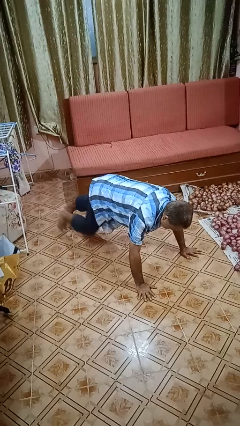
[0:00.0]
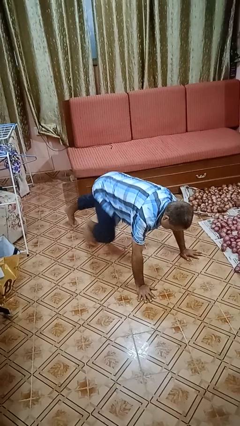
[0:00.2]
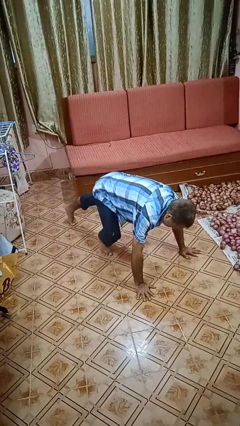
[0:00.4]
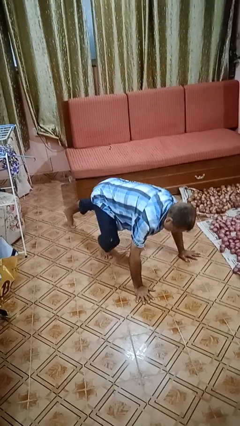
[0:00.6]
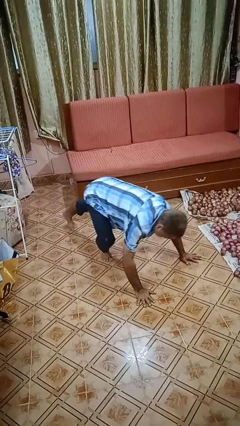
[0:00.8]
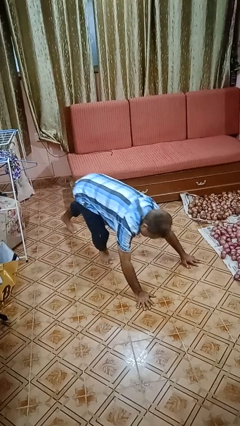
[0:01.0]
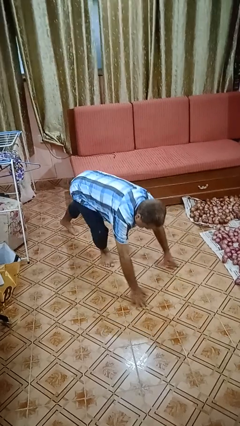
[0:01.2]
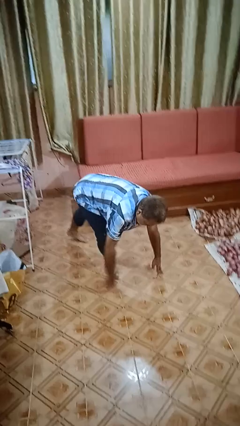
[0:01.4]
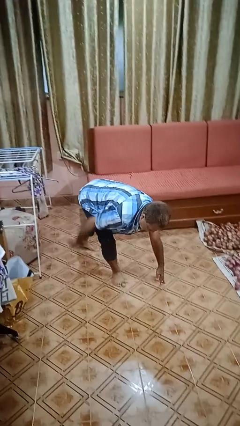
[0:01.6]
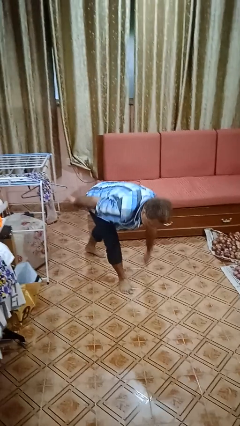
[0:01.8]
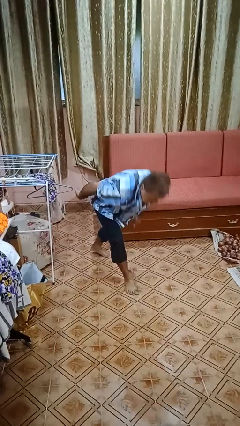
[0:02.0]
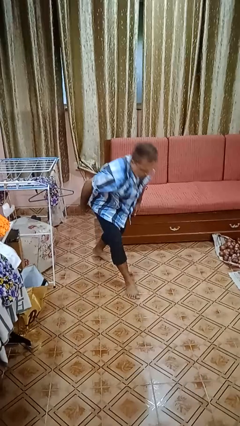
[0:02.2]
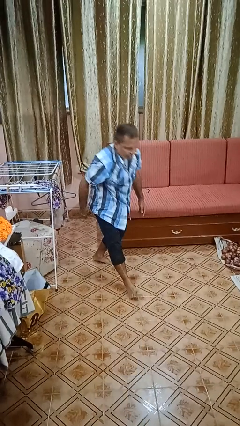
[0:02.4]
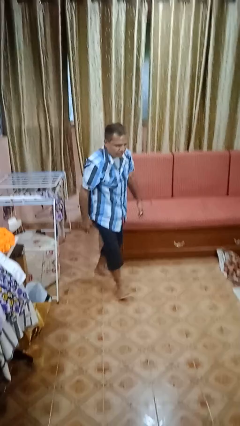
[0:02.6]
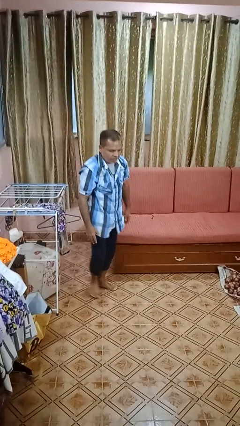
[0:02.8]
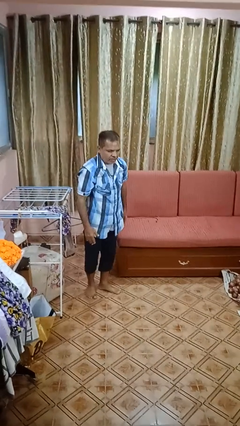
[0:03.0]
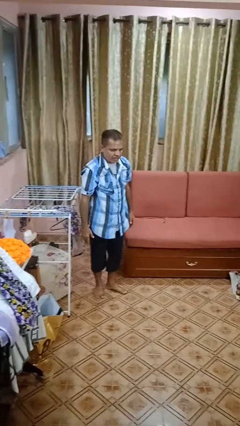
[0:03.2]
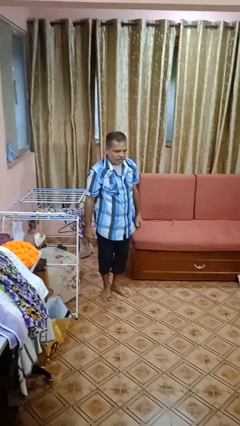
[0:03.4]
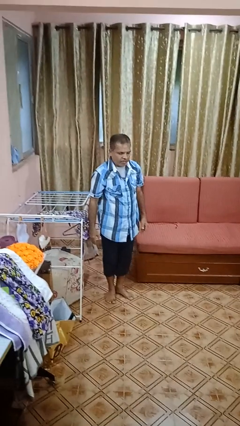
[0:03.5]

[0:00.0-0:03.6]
person stands up from floor

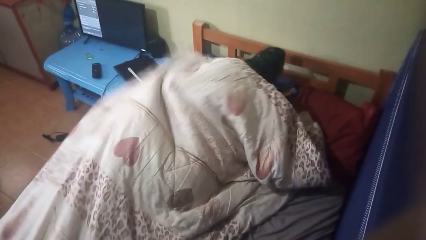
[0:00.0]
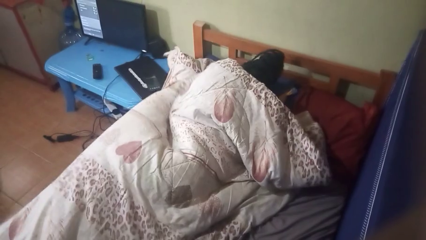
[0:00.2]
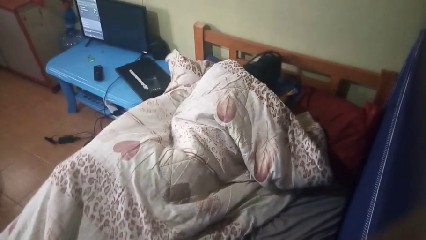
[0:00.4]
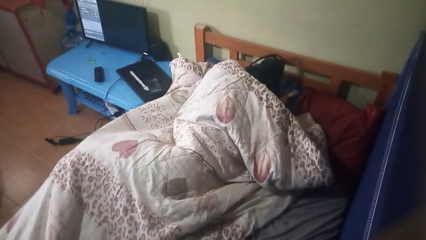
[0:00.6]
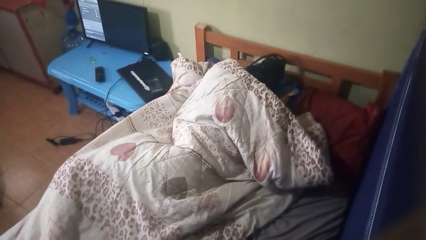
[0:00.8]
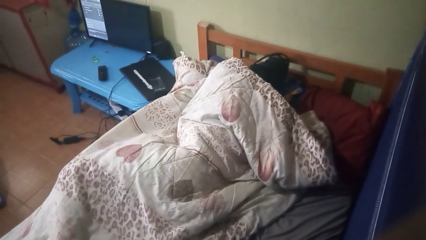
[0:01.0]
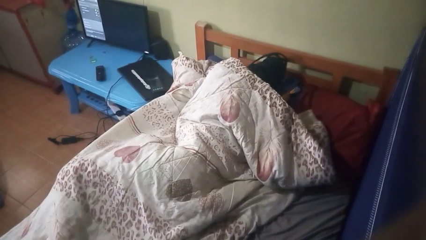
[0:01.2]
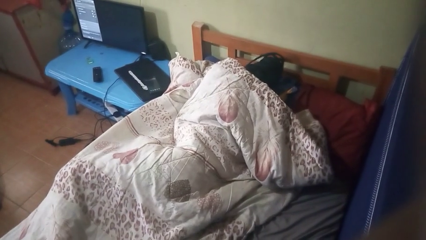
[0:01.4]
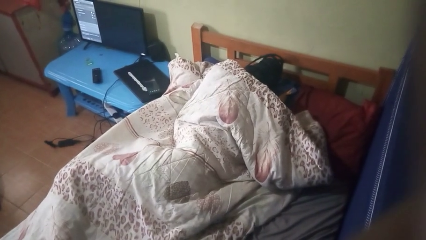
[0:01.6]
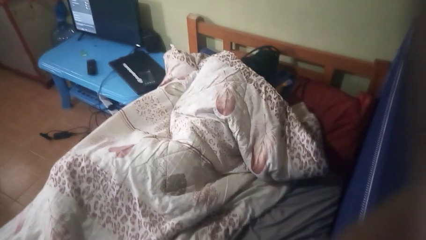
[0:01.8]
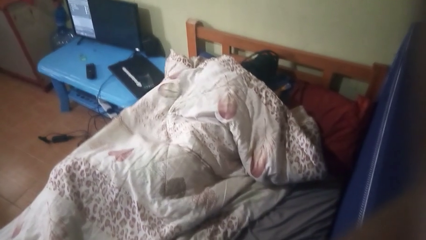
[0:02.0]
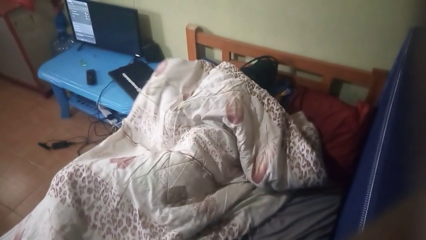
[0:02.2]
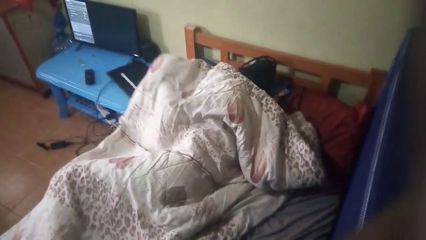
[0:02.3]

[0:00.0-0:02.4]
person covers with blanket

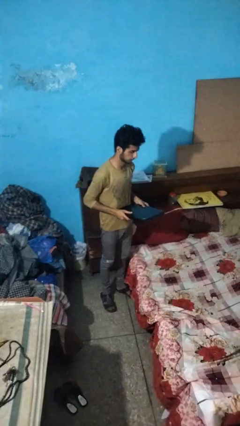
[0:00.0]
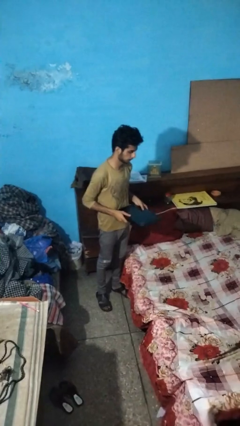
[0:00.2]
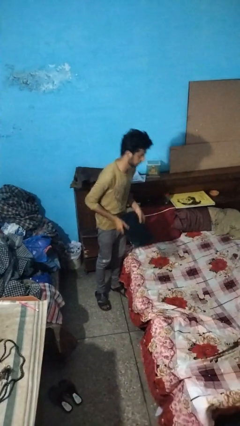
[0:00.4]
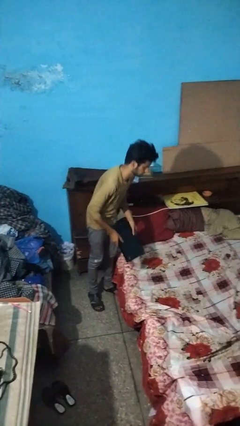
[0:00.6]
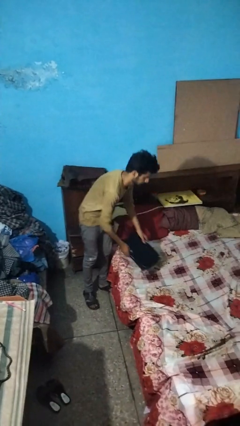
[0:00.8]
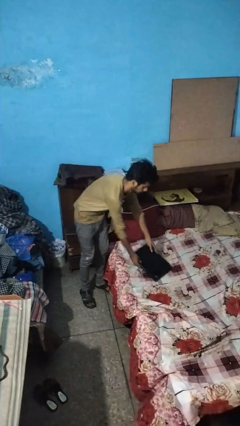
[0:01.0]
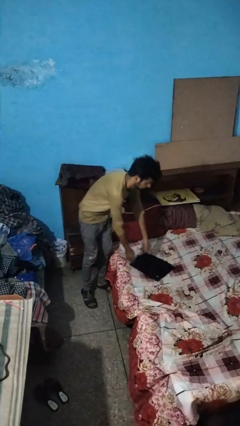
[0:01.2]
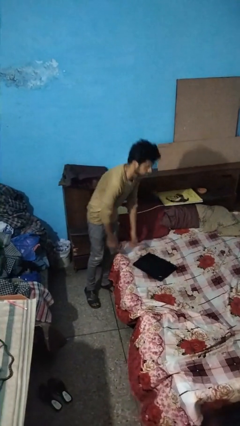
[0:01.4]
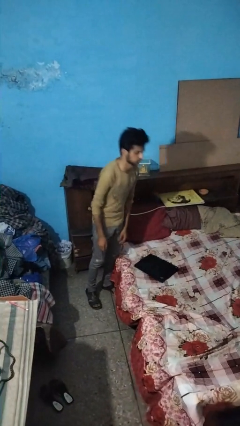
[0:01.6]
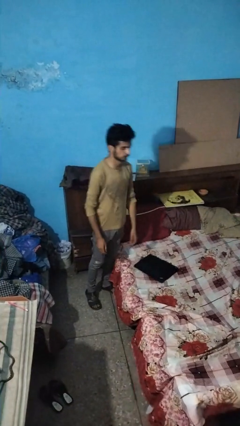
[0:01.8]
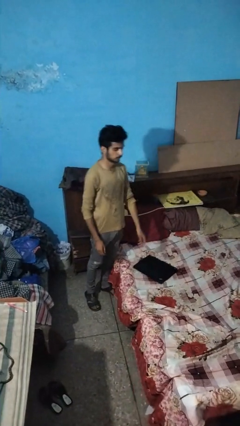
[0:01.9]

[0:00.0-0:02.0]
person puts down object on bed

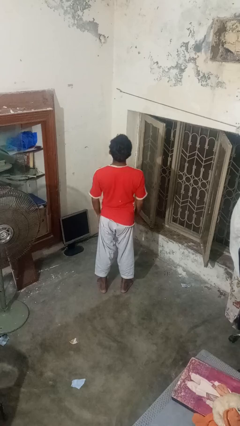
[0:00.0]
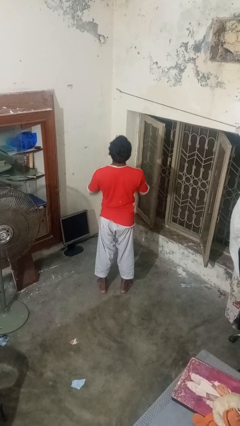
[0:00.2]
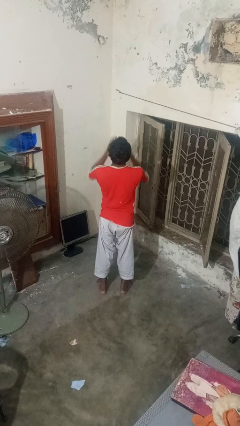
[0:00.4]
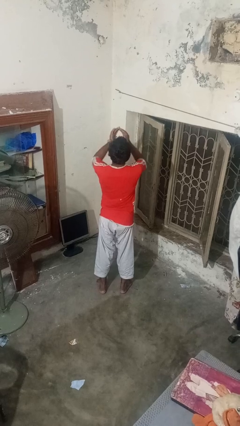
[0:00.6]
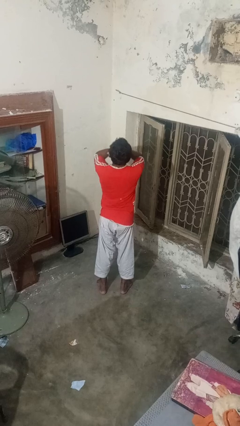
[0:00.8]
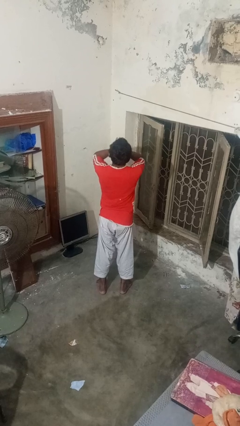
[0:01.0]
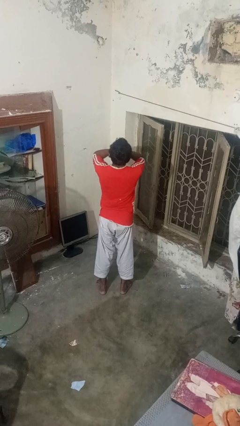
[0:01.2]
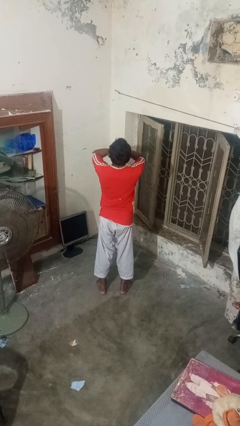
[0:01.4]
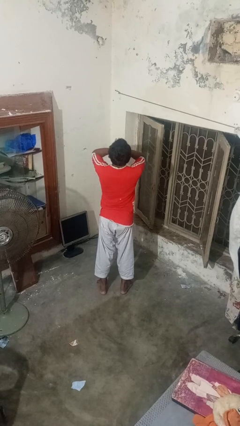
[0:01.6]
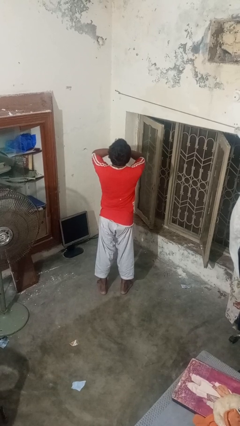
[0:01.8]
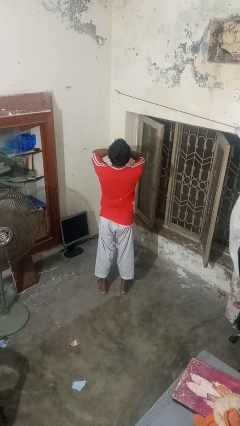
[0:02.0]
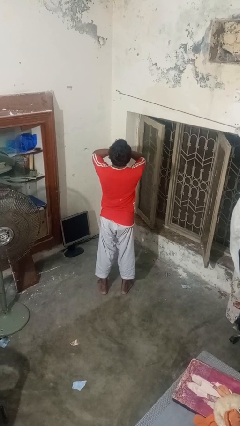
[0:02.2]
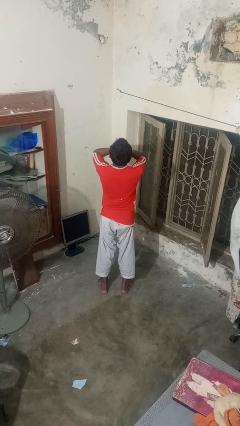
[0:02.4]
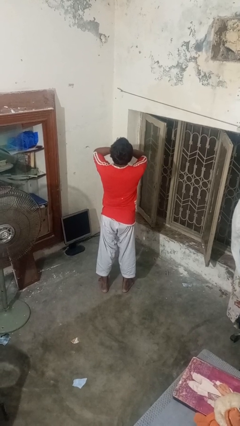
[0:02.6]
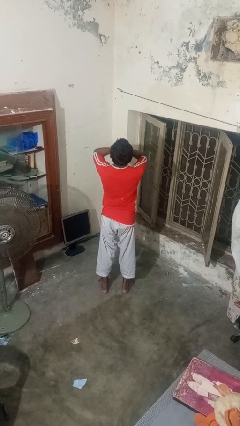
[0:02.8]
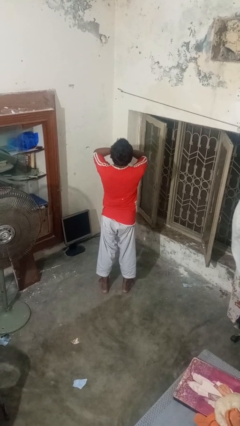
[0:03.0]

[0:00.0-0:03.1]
person covers face with hands

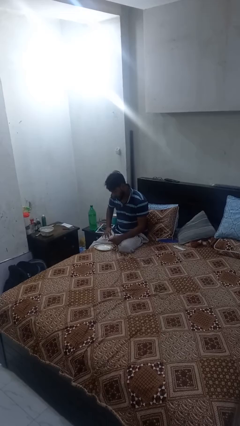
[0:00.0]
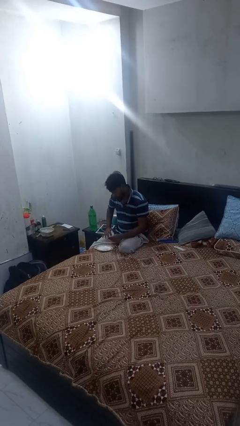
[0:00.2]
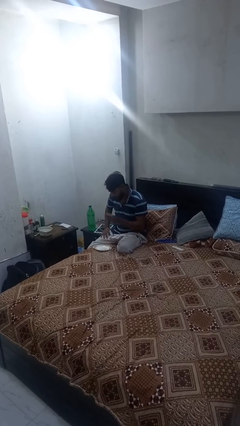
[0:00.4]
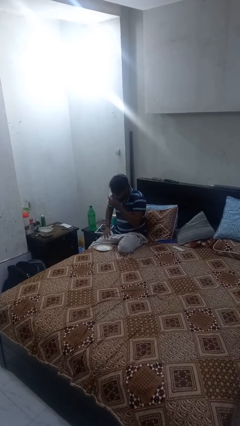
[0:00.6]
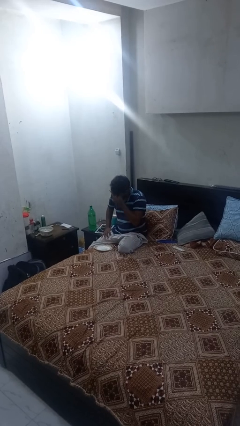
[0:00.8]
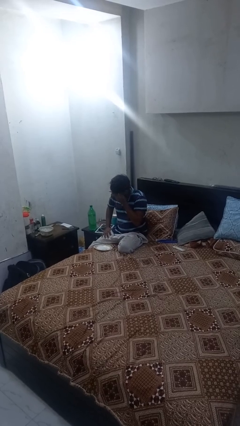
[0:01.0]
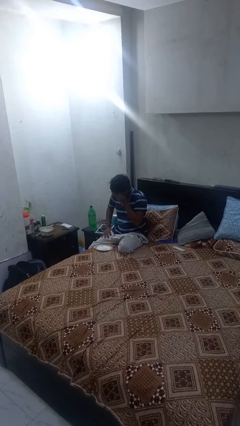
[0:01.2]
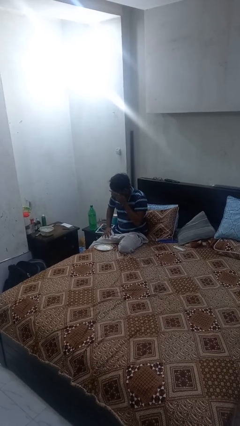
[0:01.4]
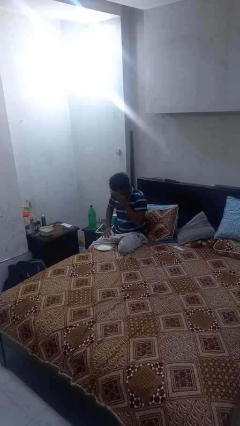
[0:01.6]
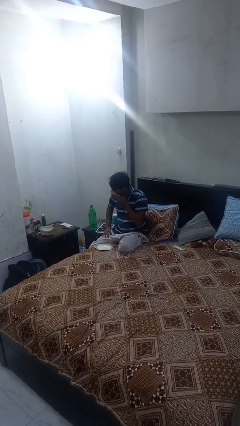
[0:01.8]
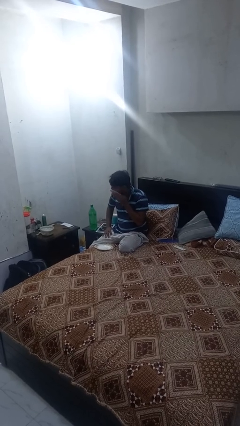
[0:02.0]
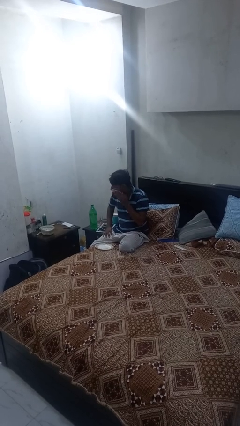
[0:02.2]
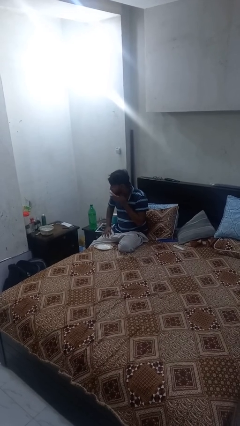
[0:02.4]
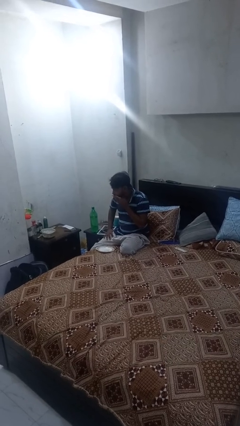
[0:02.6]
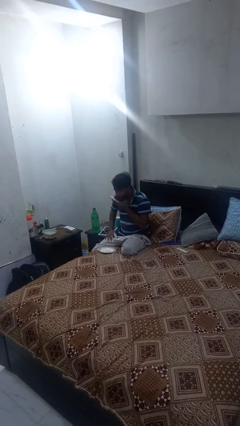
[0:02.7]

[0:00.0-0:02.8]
person wipes mouth with napkin

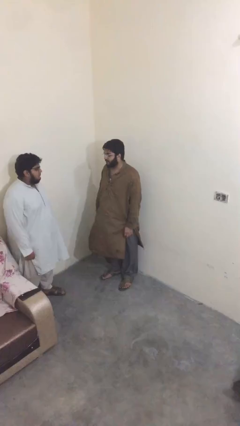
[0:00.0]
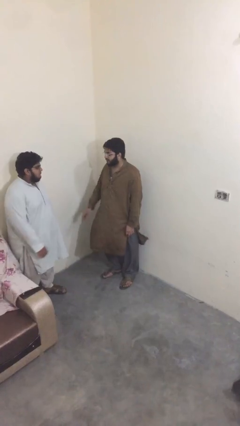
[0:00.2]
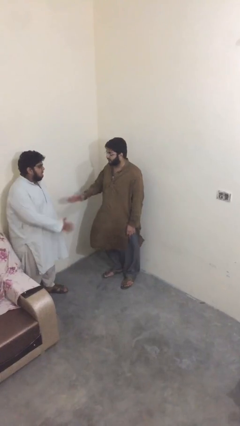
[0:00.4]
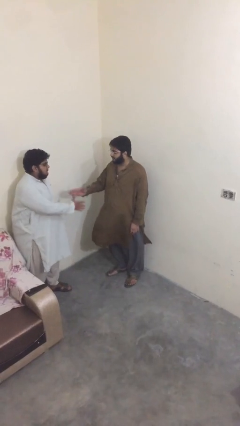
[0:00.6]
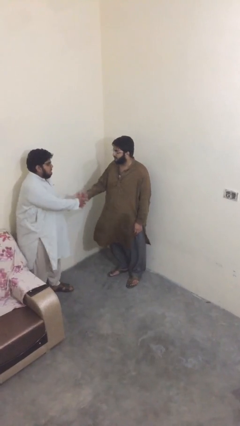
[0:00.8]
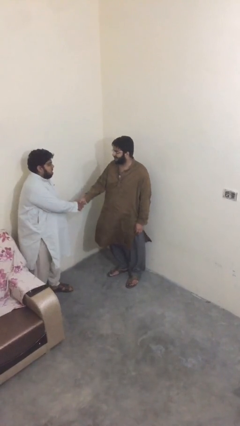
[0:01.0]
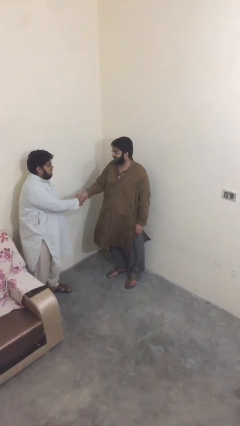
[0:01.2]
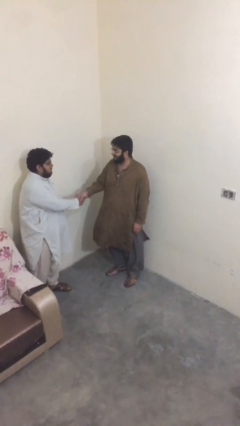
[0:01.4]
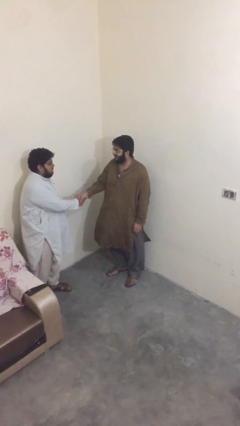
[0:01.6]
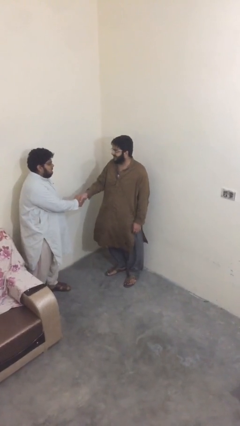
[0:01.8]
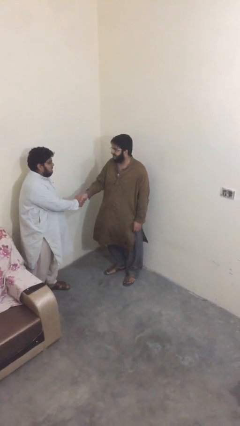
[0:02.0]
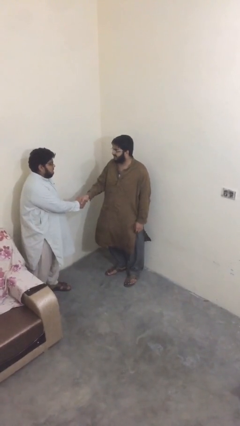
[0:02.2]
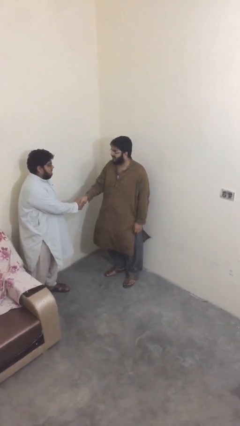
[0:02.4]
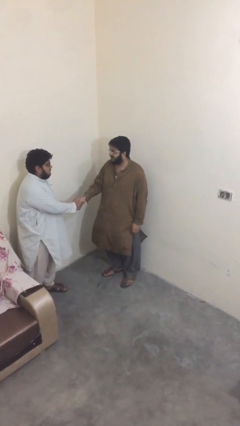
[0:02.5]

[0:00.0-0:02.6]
person shakes hand

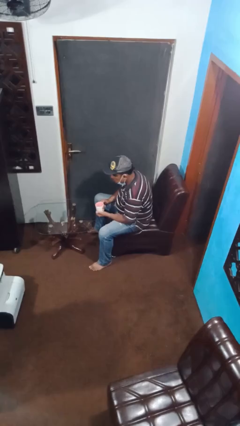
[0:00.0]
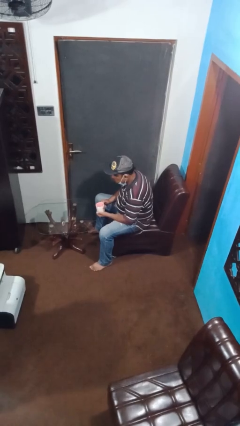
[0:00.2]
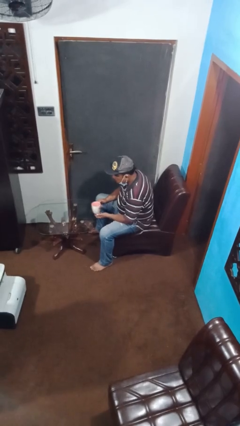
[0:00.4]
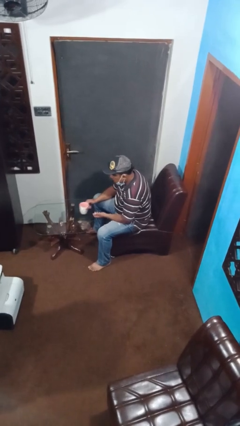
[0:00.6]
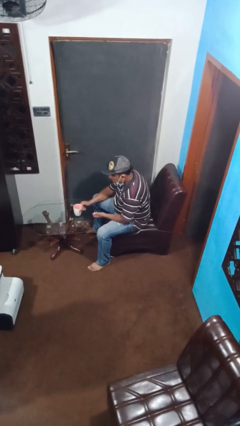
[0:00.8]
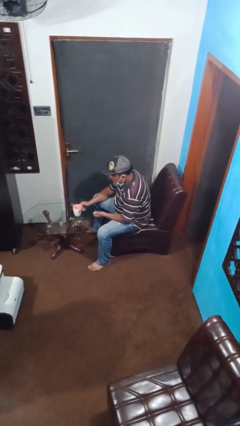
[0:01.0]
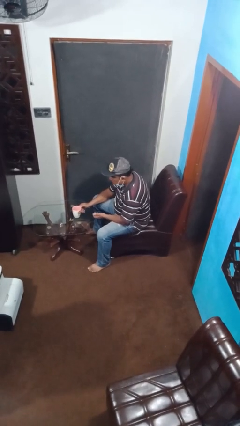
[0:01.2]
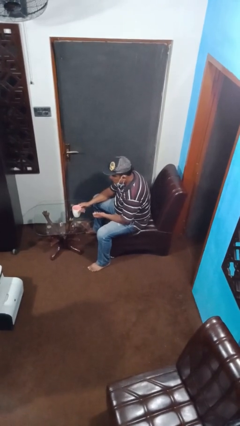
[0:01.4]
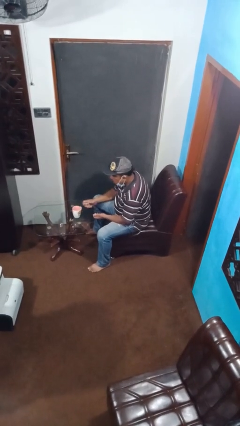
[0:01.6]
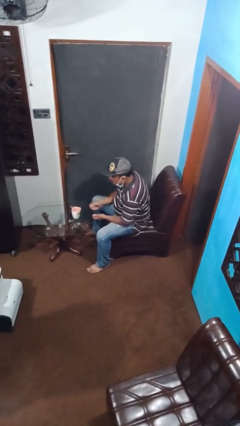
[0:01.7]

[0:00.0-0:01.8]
person puts down object on table
